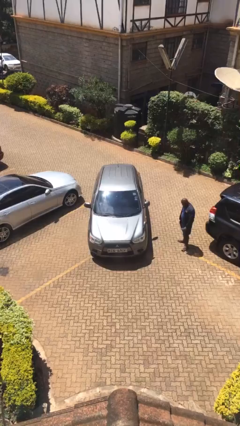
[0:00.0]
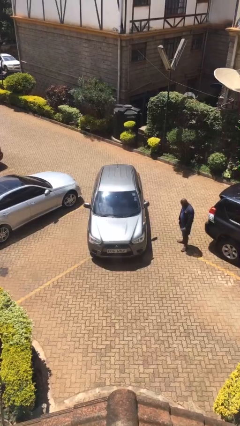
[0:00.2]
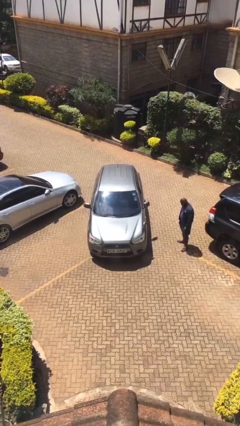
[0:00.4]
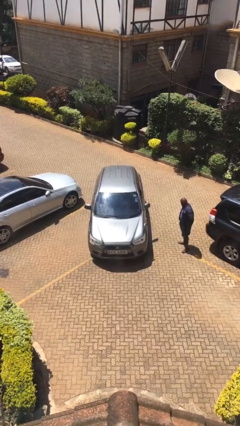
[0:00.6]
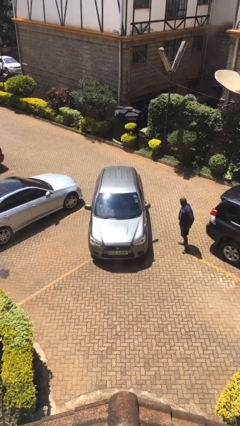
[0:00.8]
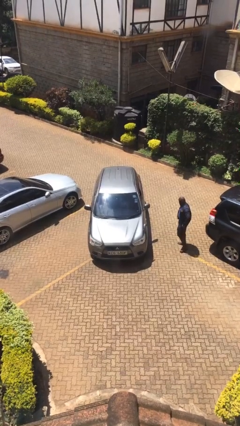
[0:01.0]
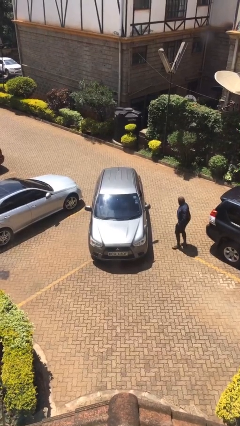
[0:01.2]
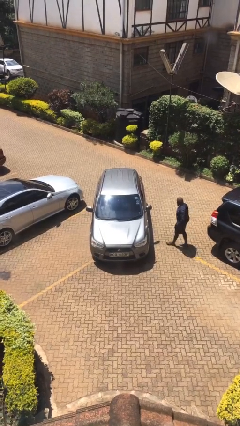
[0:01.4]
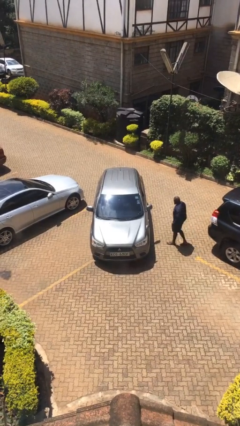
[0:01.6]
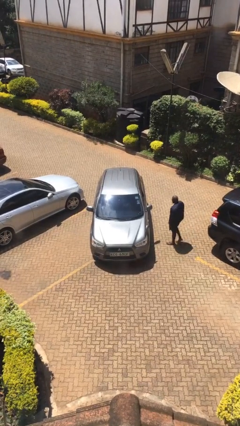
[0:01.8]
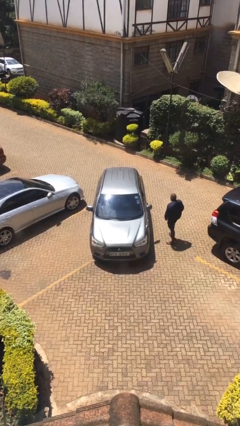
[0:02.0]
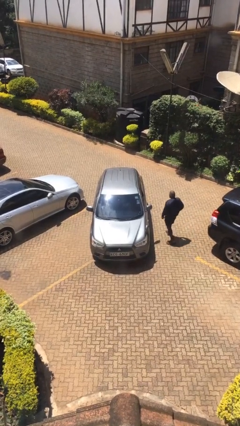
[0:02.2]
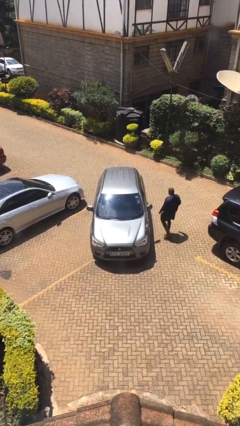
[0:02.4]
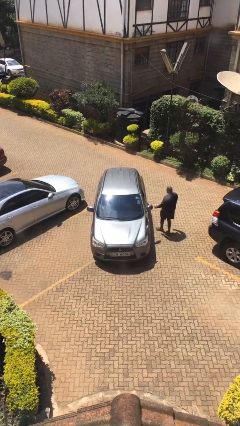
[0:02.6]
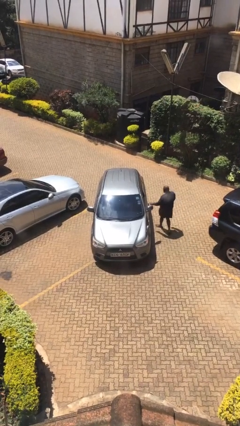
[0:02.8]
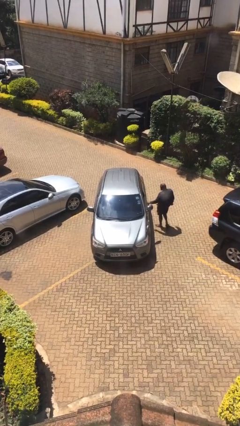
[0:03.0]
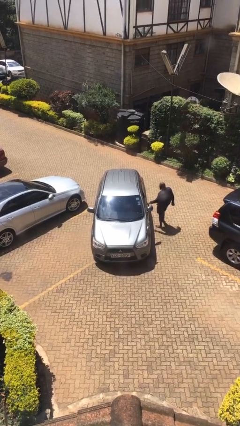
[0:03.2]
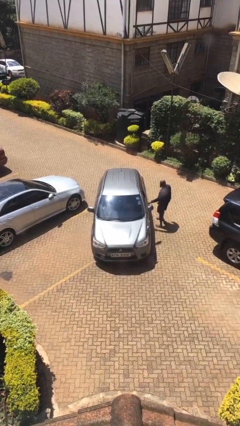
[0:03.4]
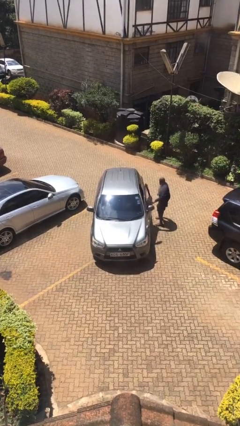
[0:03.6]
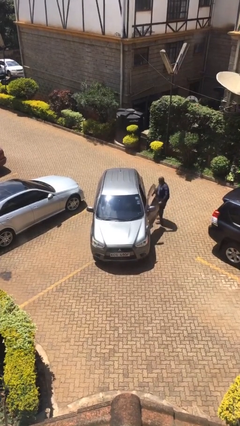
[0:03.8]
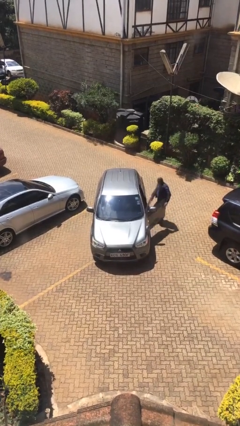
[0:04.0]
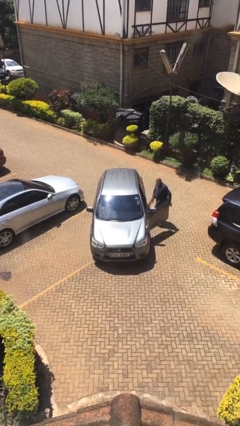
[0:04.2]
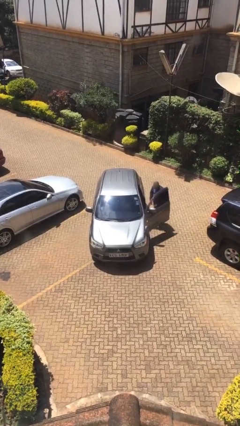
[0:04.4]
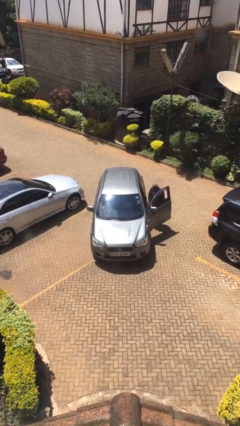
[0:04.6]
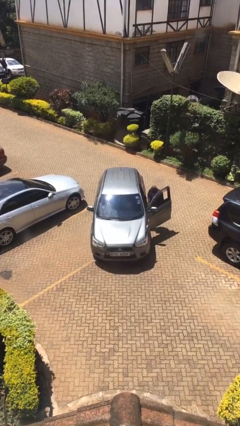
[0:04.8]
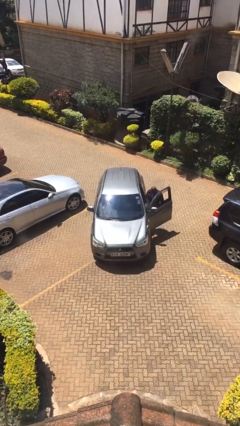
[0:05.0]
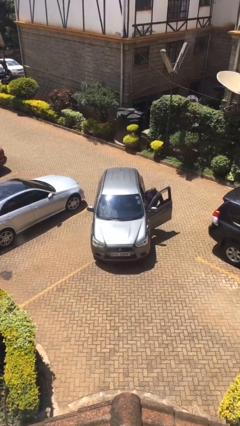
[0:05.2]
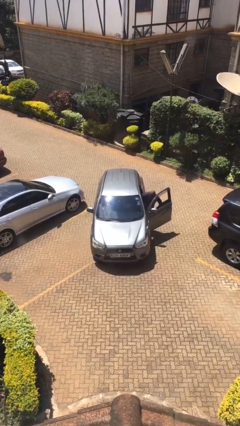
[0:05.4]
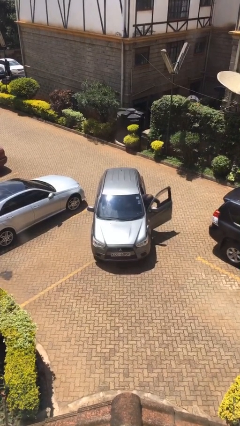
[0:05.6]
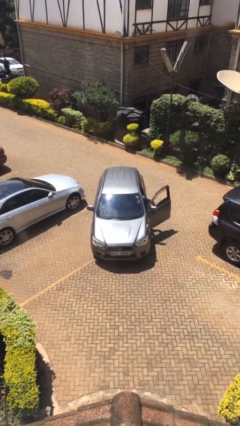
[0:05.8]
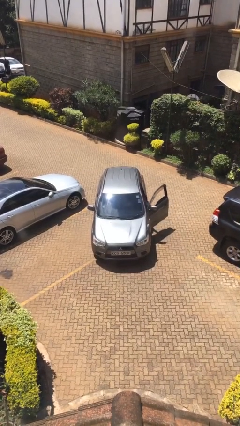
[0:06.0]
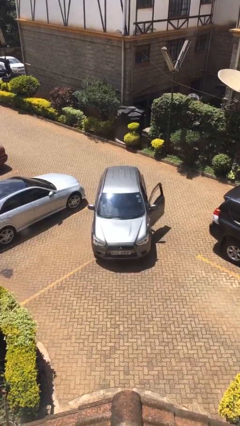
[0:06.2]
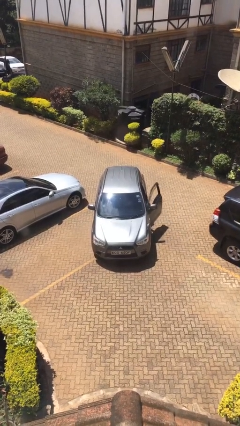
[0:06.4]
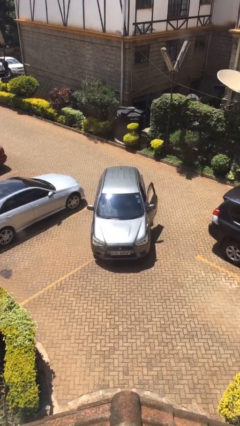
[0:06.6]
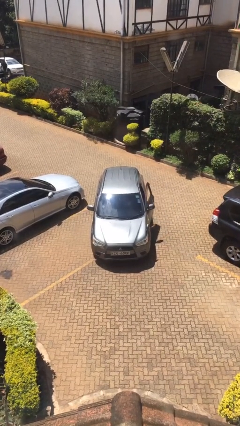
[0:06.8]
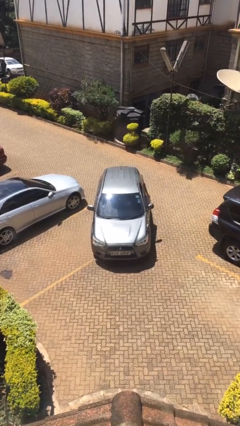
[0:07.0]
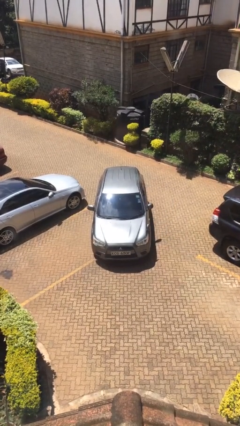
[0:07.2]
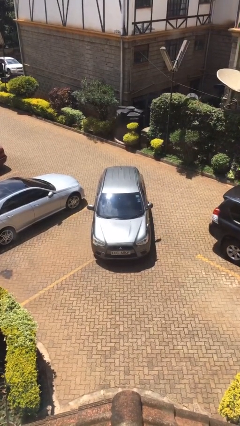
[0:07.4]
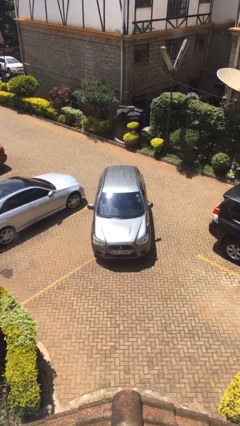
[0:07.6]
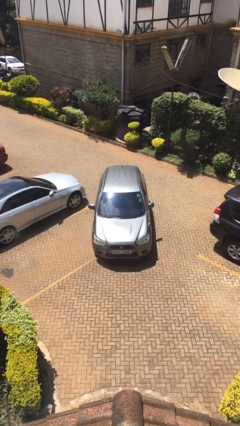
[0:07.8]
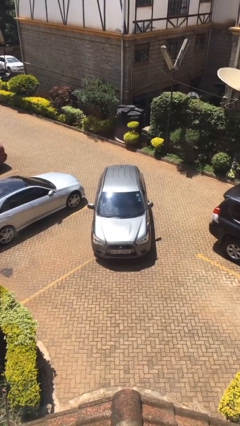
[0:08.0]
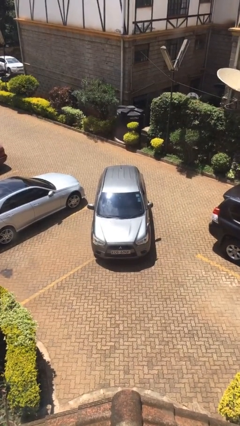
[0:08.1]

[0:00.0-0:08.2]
car picks up person

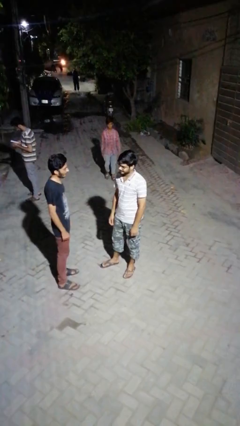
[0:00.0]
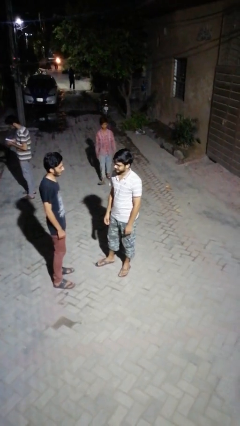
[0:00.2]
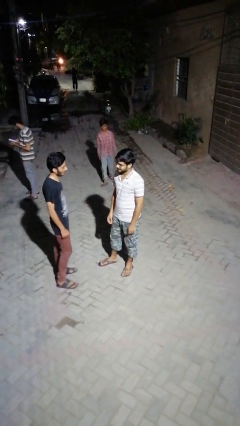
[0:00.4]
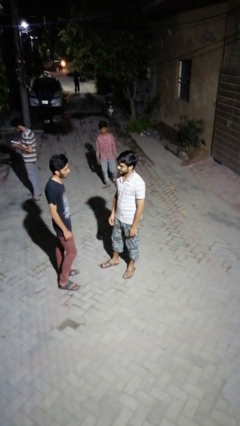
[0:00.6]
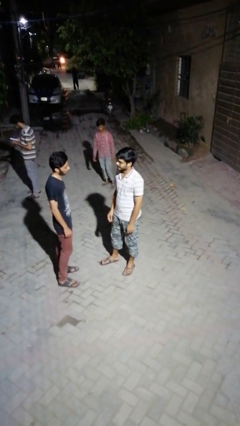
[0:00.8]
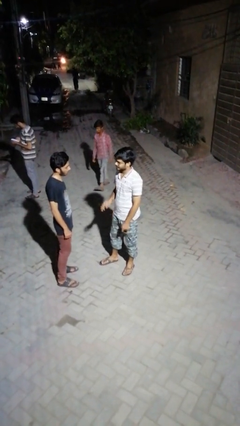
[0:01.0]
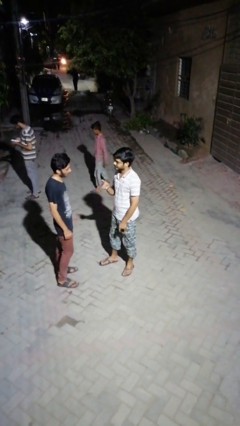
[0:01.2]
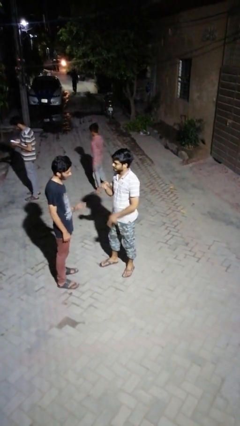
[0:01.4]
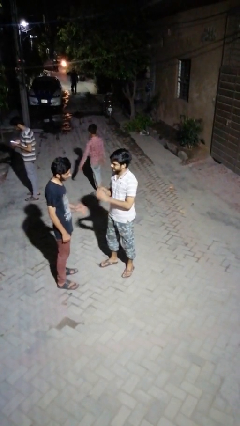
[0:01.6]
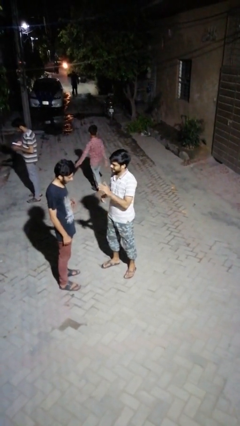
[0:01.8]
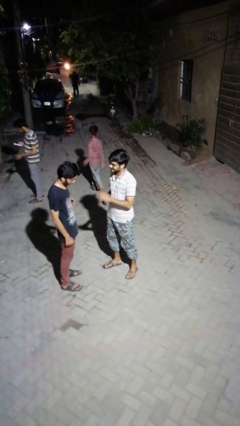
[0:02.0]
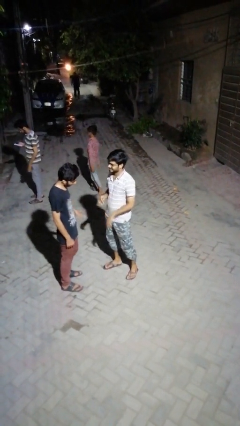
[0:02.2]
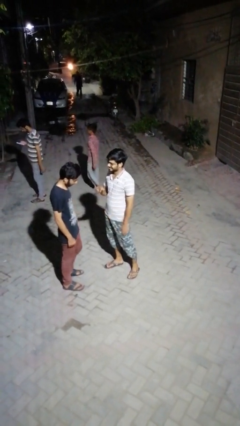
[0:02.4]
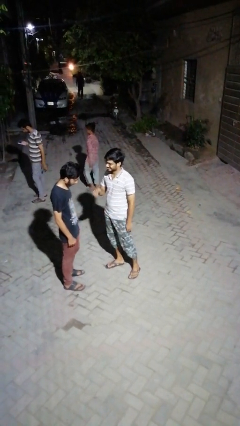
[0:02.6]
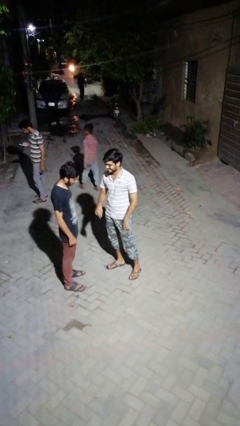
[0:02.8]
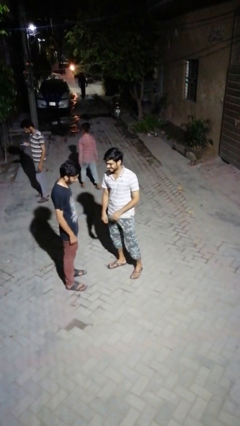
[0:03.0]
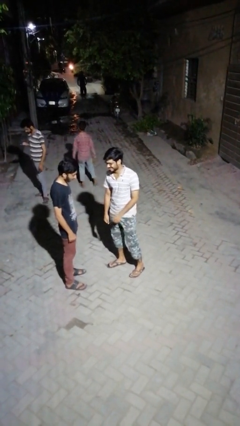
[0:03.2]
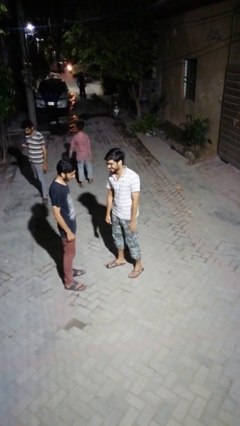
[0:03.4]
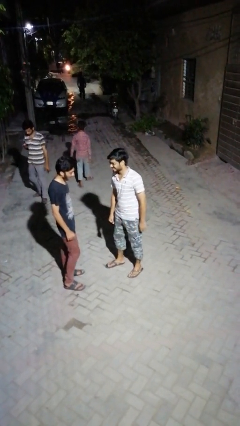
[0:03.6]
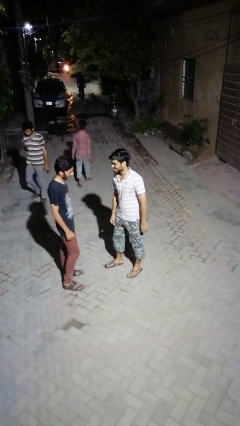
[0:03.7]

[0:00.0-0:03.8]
person talks to person

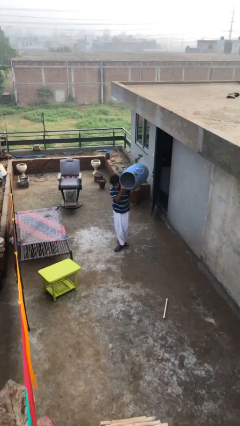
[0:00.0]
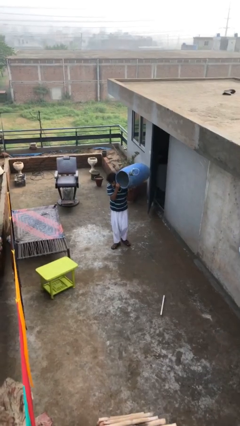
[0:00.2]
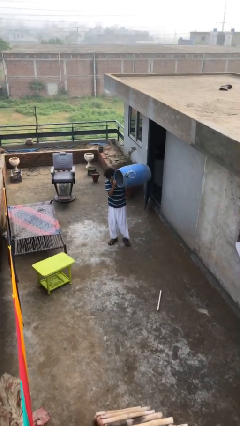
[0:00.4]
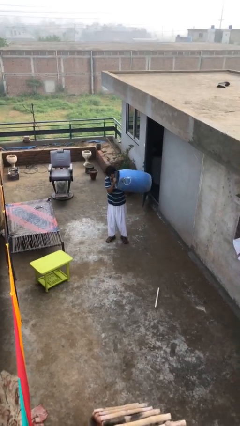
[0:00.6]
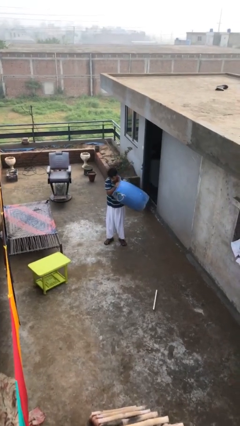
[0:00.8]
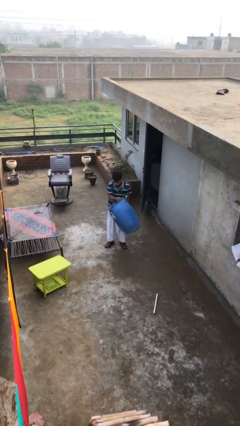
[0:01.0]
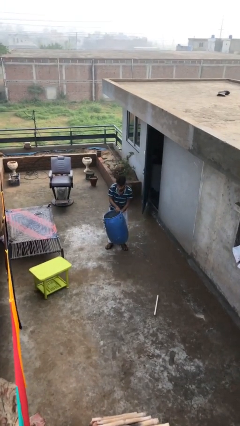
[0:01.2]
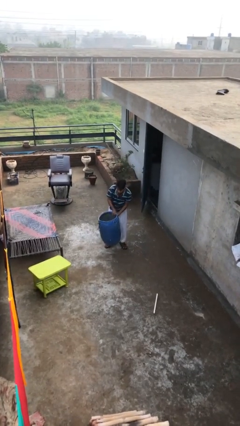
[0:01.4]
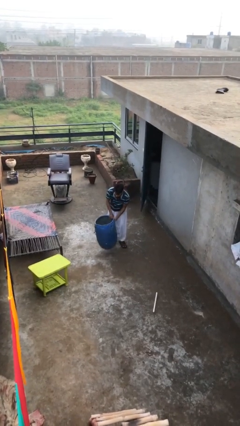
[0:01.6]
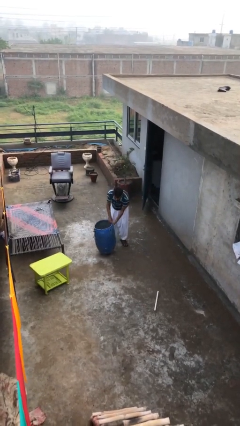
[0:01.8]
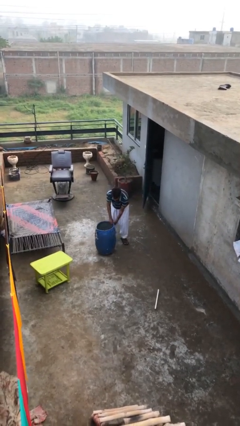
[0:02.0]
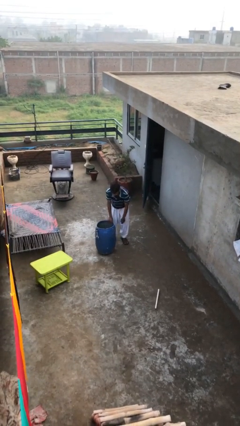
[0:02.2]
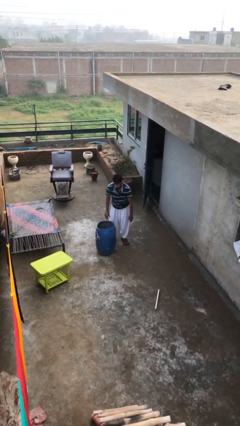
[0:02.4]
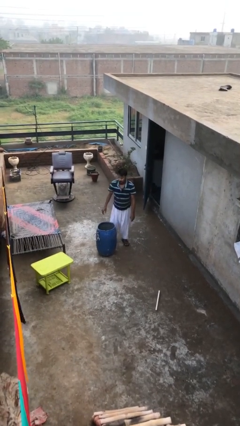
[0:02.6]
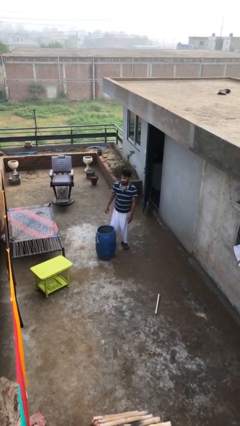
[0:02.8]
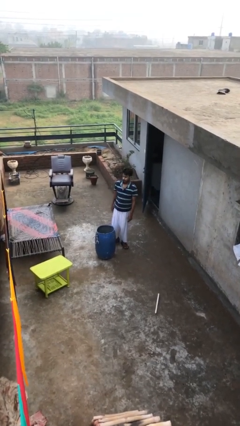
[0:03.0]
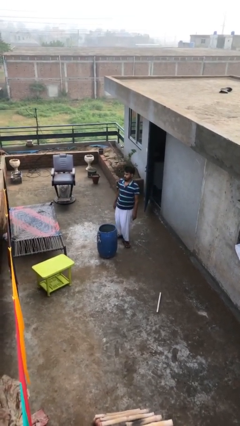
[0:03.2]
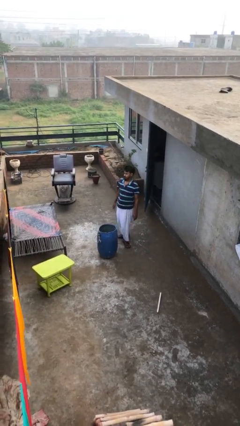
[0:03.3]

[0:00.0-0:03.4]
person puts down object on floor

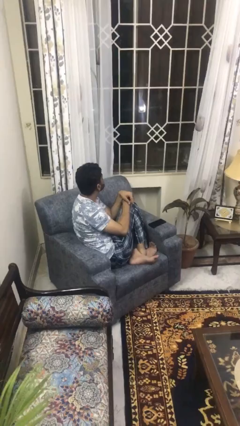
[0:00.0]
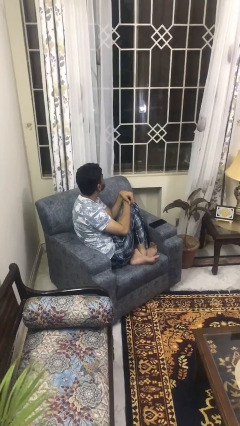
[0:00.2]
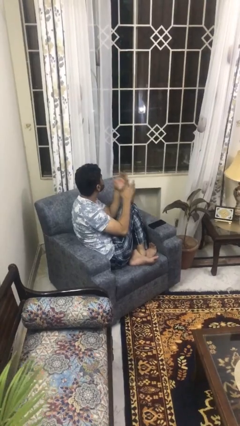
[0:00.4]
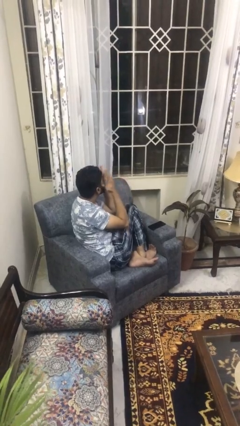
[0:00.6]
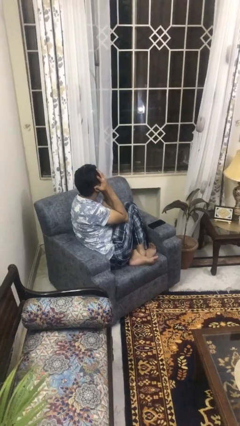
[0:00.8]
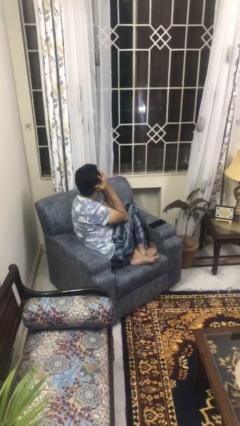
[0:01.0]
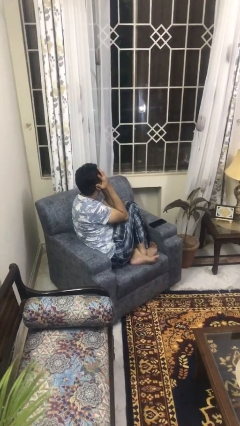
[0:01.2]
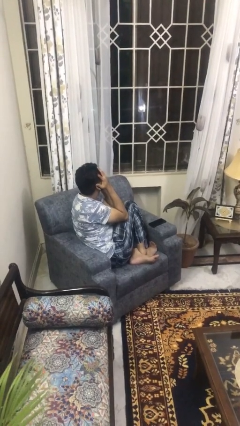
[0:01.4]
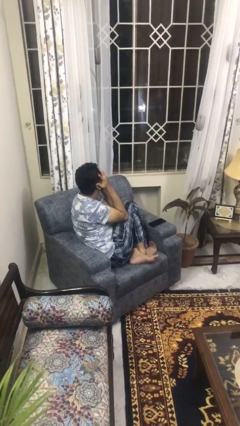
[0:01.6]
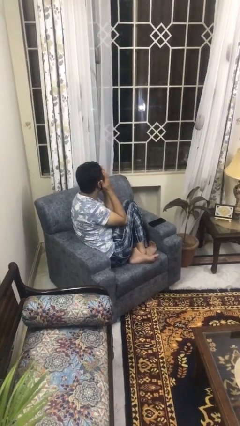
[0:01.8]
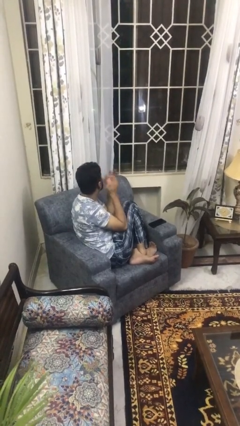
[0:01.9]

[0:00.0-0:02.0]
person covers face with hands

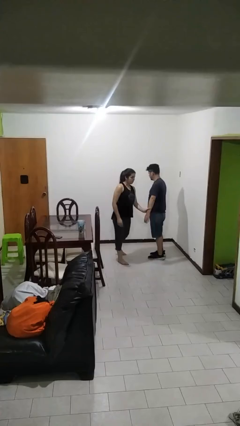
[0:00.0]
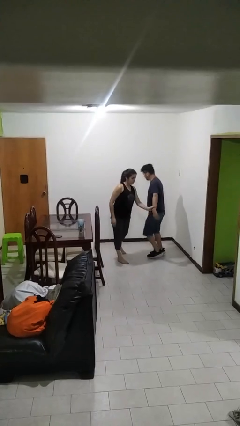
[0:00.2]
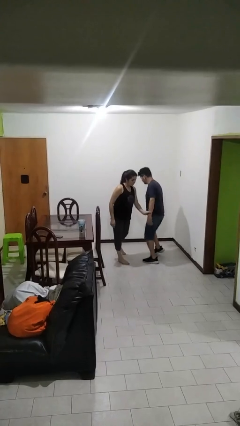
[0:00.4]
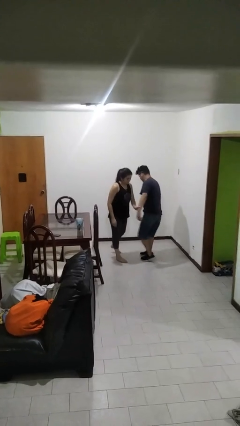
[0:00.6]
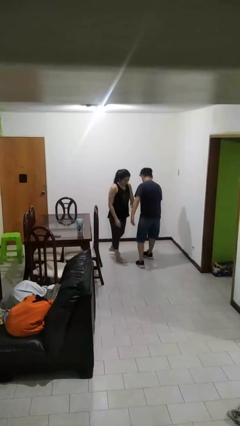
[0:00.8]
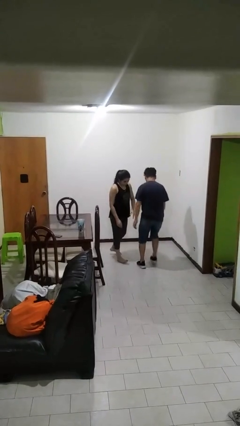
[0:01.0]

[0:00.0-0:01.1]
person grabs person by forearm
